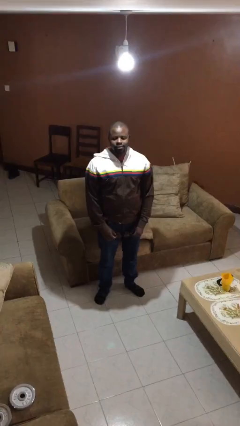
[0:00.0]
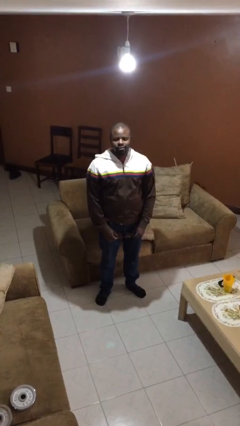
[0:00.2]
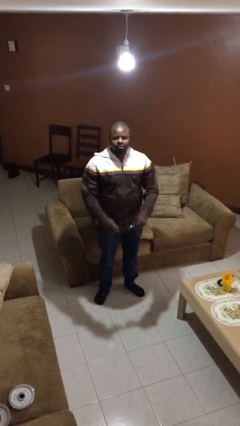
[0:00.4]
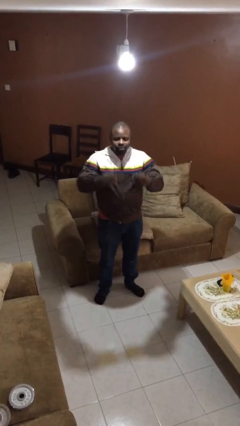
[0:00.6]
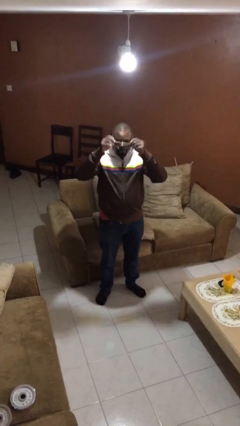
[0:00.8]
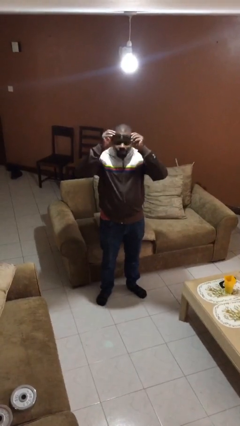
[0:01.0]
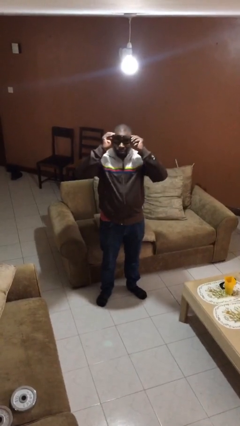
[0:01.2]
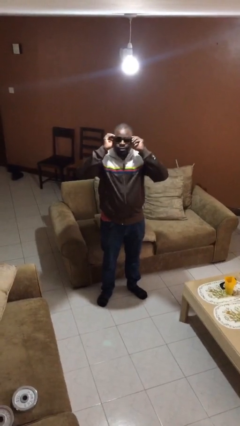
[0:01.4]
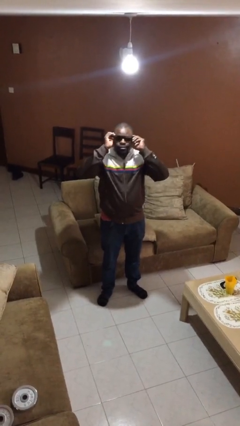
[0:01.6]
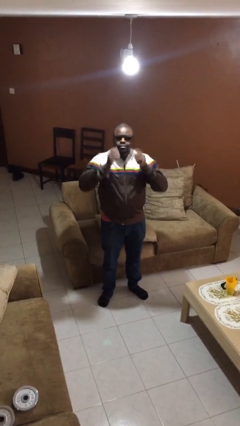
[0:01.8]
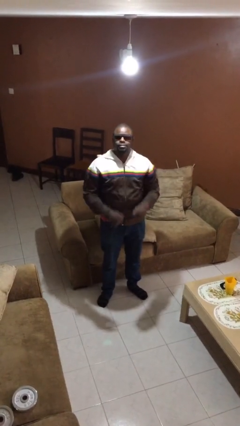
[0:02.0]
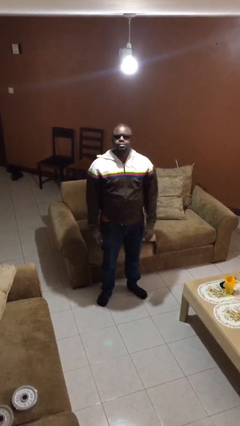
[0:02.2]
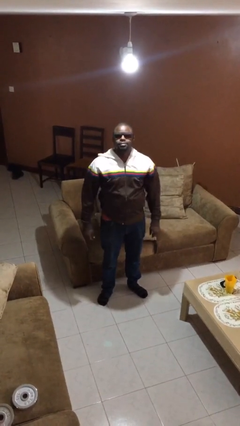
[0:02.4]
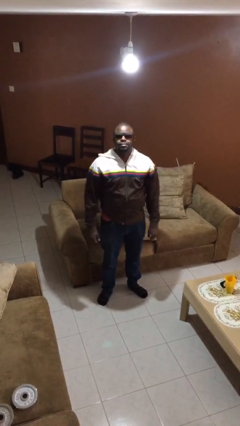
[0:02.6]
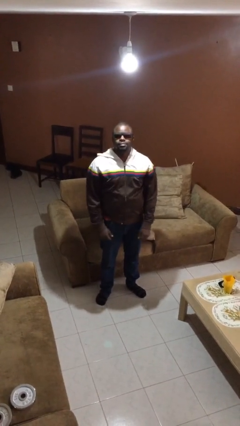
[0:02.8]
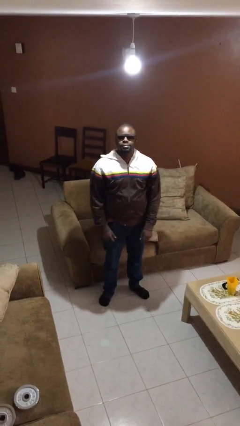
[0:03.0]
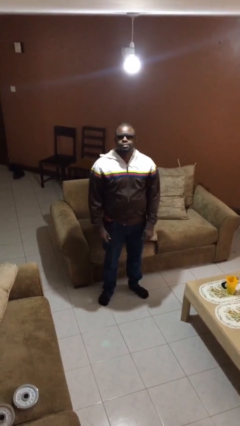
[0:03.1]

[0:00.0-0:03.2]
person puts on sunglasses

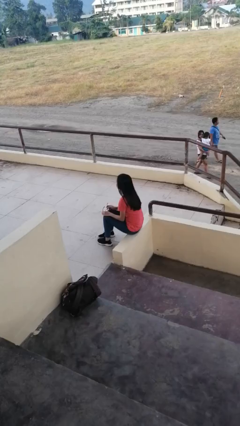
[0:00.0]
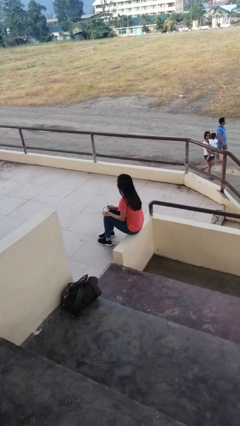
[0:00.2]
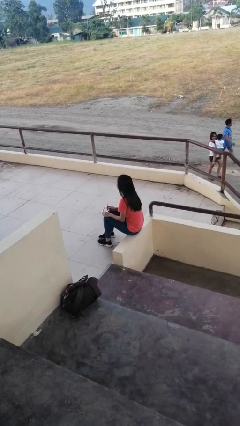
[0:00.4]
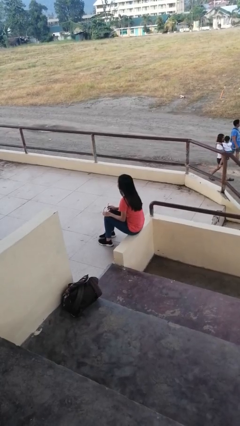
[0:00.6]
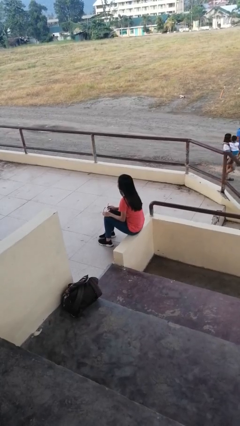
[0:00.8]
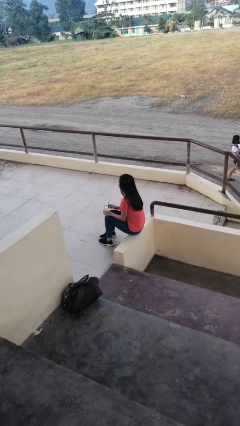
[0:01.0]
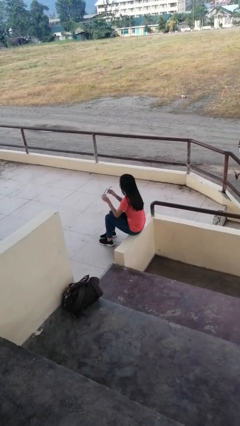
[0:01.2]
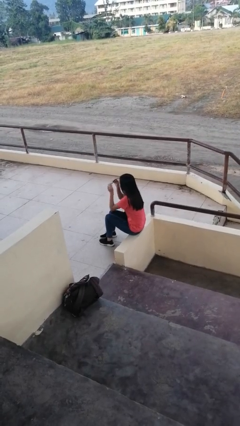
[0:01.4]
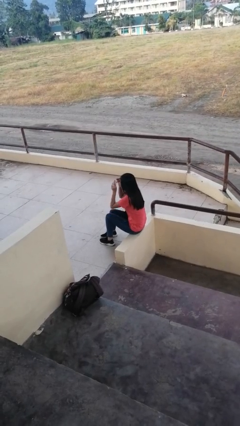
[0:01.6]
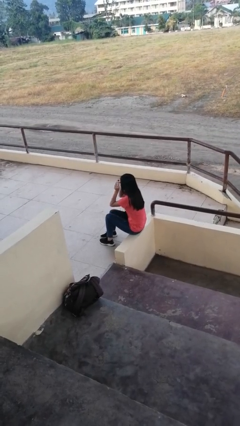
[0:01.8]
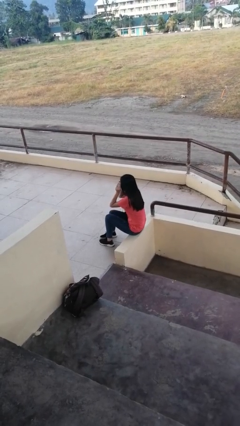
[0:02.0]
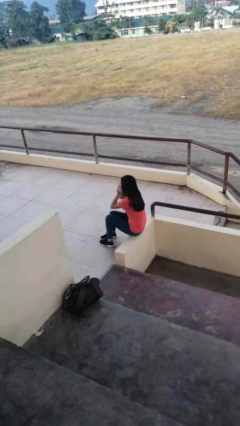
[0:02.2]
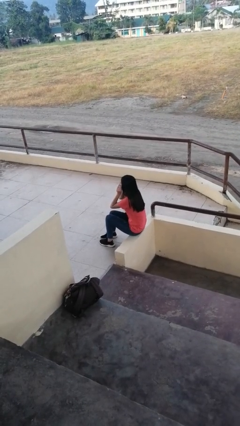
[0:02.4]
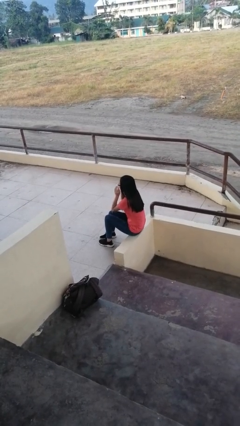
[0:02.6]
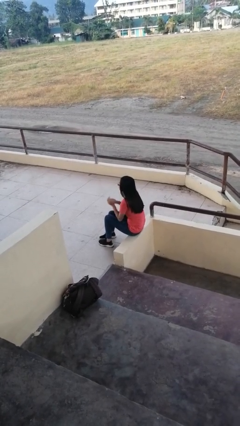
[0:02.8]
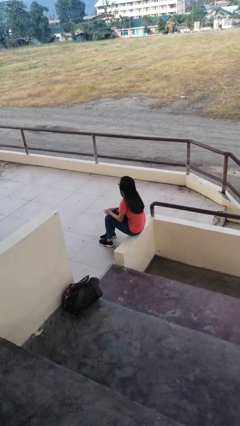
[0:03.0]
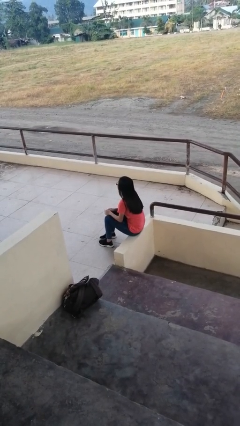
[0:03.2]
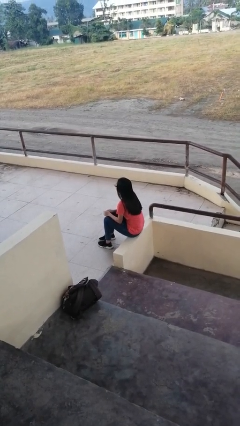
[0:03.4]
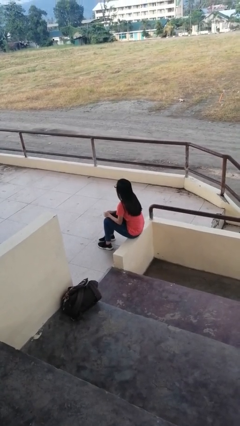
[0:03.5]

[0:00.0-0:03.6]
person puts on glasses

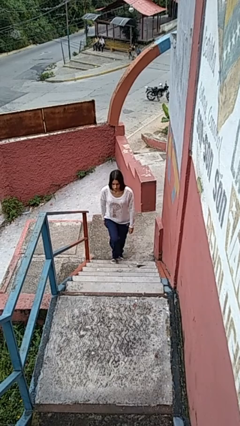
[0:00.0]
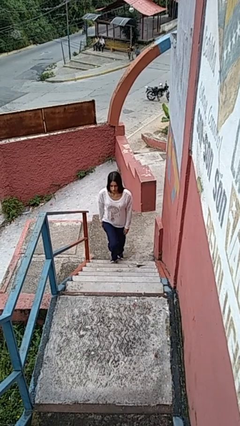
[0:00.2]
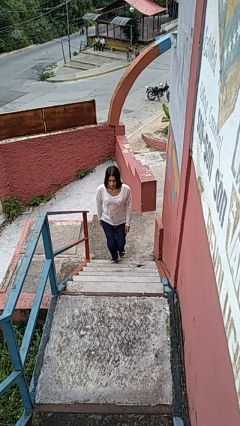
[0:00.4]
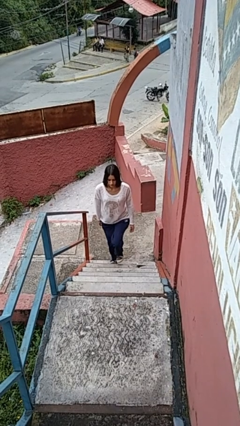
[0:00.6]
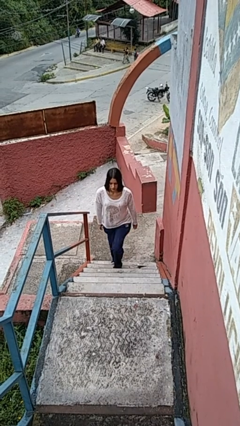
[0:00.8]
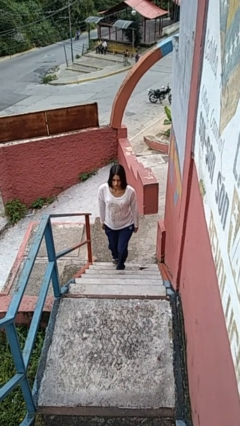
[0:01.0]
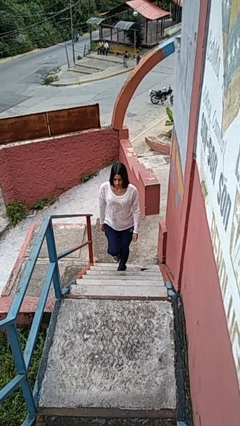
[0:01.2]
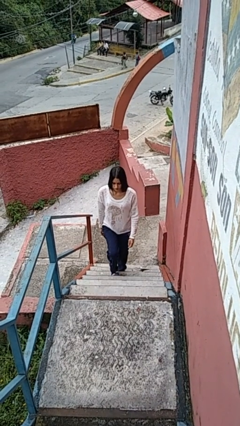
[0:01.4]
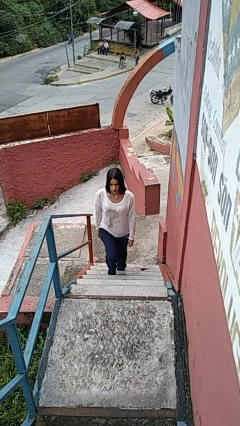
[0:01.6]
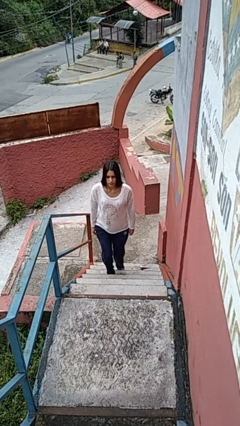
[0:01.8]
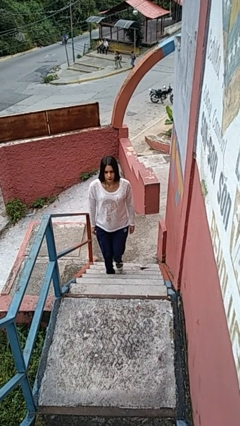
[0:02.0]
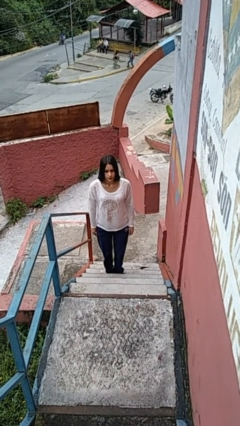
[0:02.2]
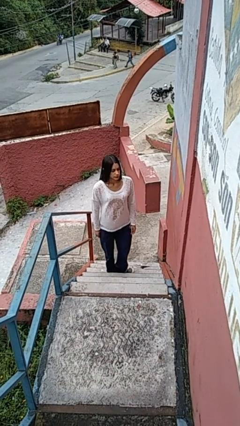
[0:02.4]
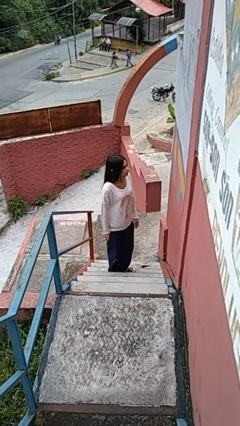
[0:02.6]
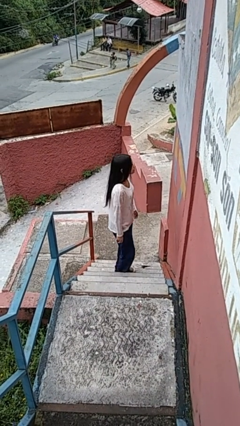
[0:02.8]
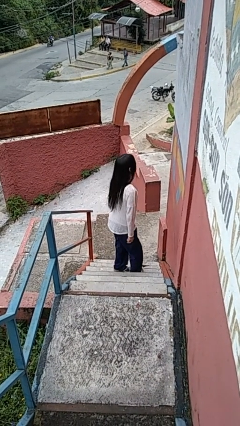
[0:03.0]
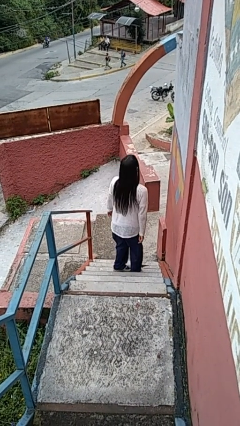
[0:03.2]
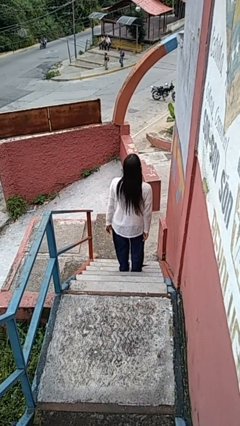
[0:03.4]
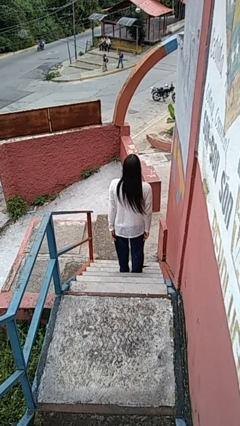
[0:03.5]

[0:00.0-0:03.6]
person climbs up stairs

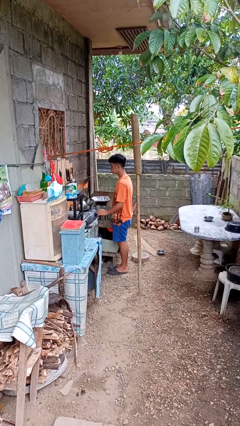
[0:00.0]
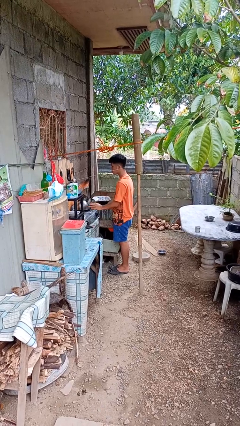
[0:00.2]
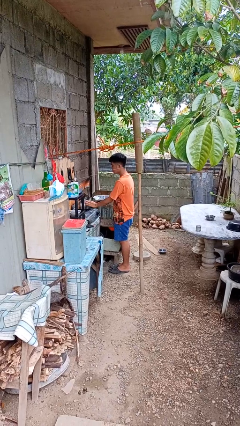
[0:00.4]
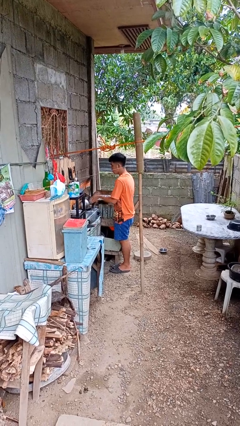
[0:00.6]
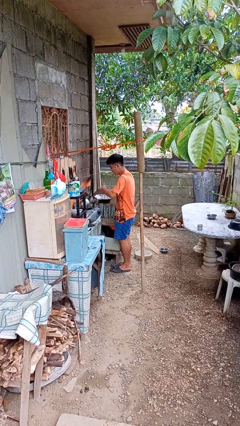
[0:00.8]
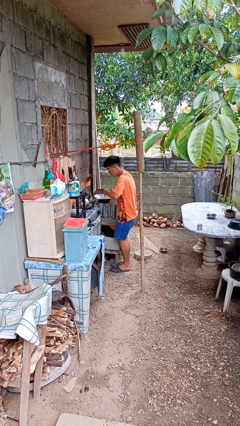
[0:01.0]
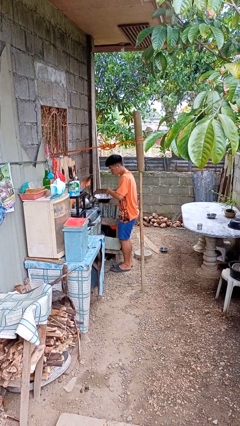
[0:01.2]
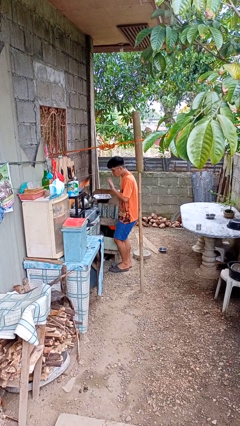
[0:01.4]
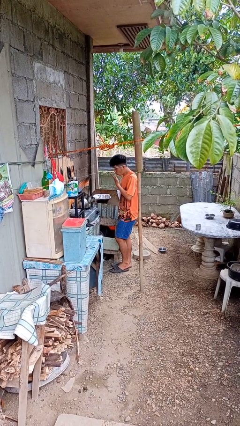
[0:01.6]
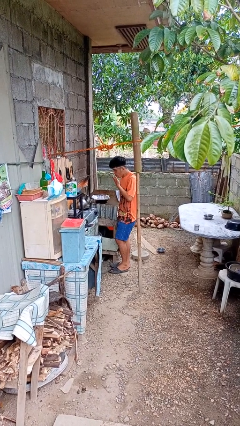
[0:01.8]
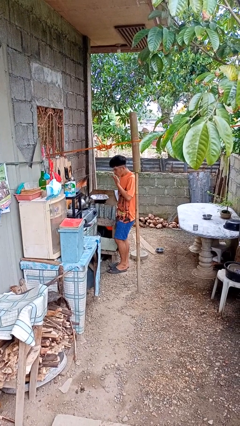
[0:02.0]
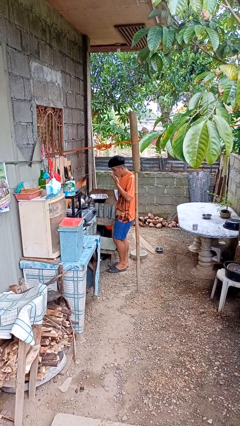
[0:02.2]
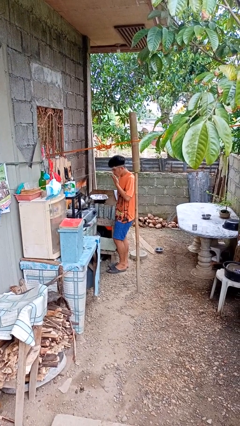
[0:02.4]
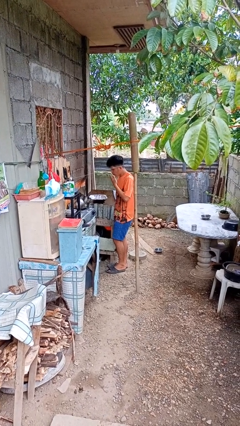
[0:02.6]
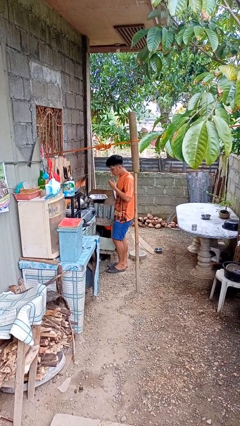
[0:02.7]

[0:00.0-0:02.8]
person burns hand

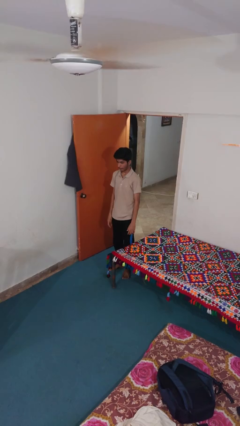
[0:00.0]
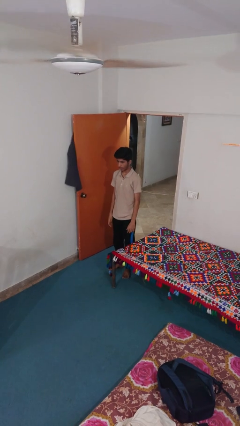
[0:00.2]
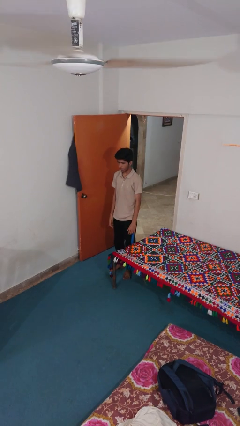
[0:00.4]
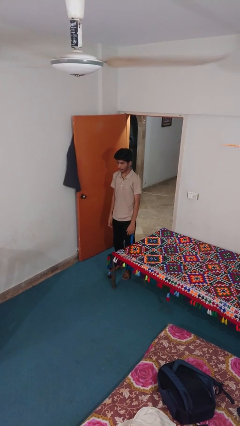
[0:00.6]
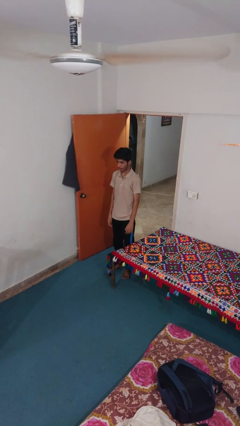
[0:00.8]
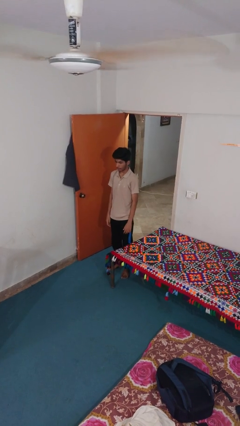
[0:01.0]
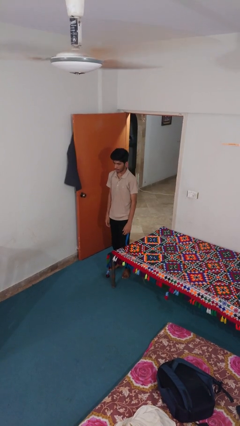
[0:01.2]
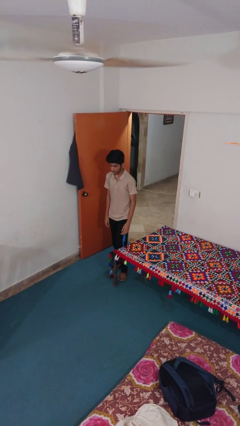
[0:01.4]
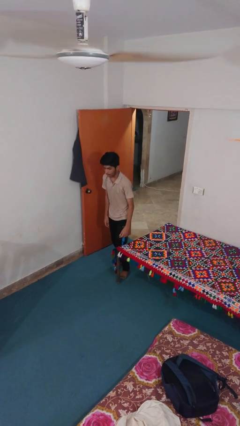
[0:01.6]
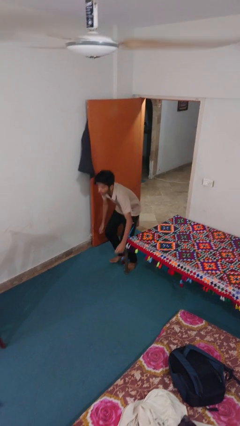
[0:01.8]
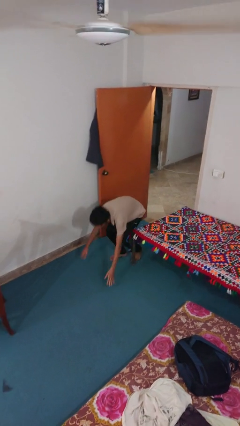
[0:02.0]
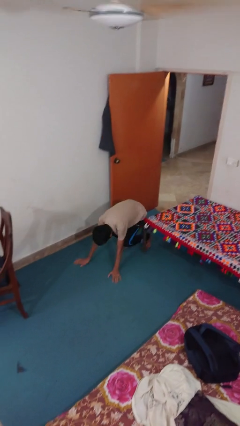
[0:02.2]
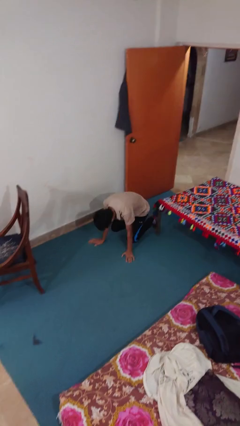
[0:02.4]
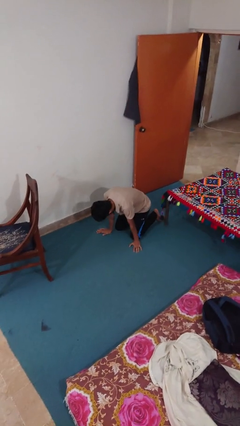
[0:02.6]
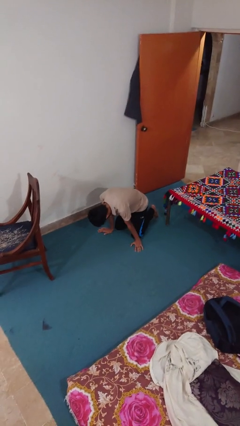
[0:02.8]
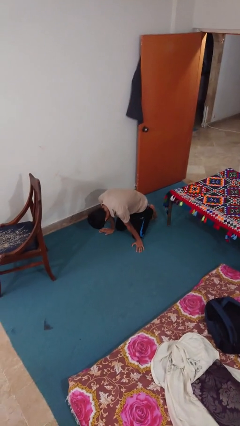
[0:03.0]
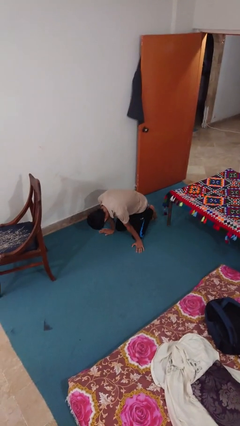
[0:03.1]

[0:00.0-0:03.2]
person trips on object on floor

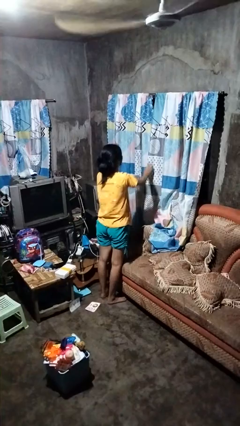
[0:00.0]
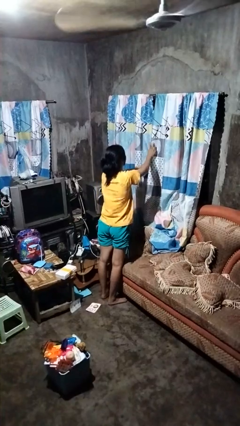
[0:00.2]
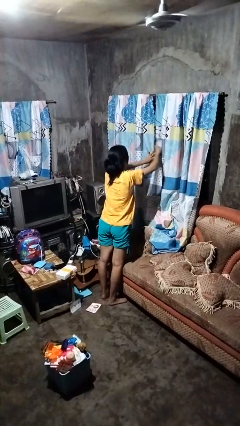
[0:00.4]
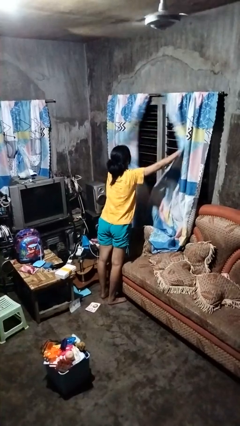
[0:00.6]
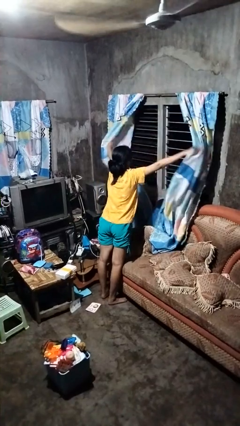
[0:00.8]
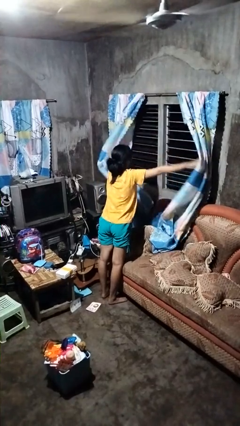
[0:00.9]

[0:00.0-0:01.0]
person opens curtains
